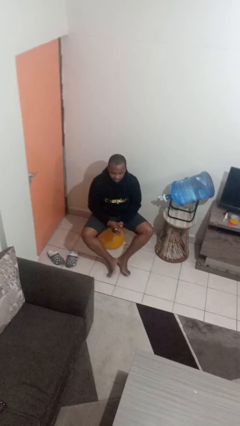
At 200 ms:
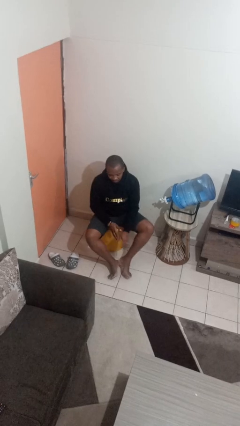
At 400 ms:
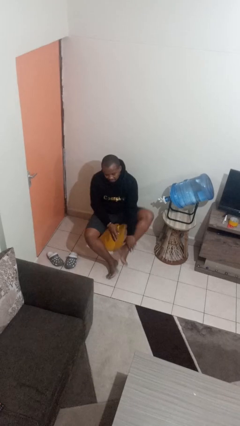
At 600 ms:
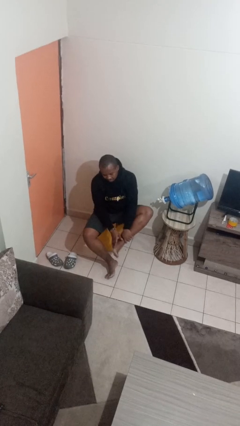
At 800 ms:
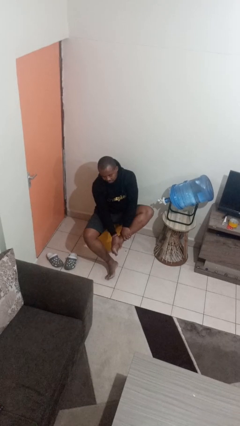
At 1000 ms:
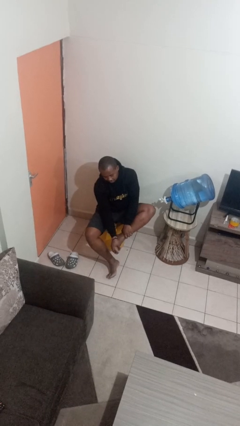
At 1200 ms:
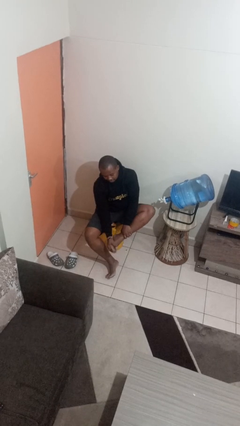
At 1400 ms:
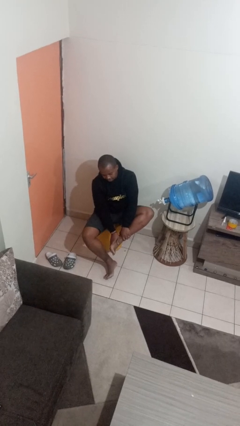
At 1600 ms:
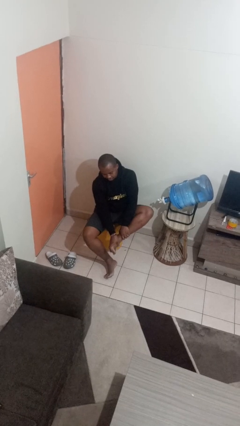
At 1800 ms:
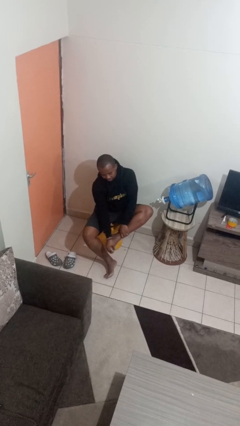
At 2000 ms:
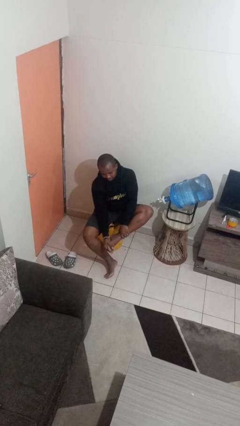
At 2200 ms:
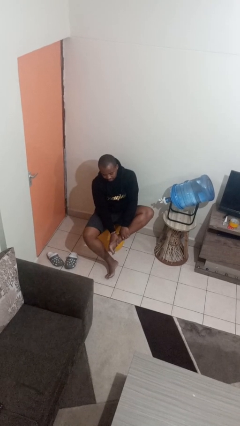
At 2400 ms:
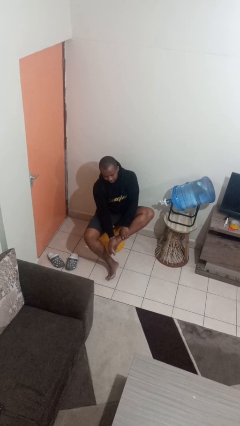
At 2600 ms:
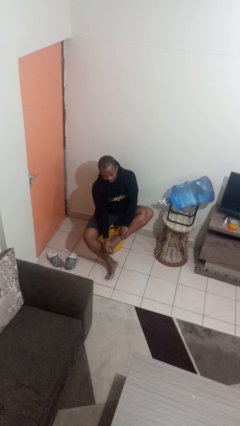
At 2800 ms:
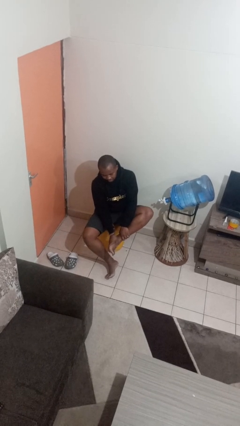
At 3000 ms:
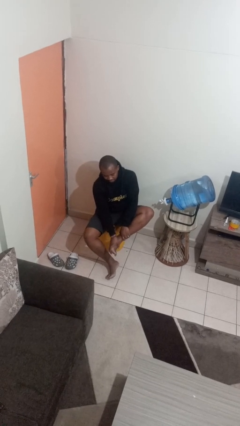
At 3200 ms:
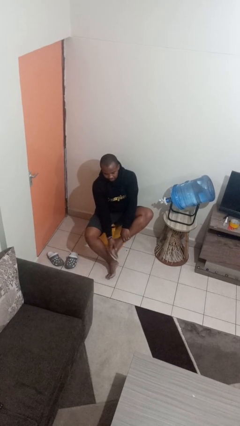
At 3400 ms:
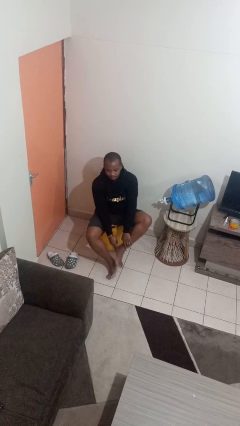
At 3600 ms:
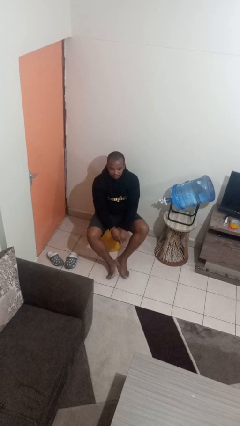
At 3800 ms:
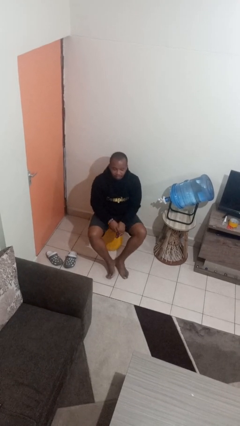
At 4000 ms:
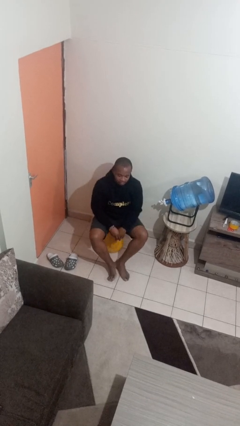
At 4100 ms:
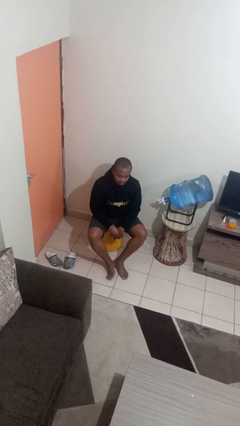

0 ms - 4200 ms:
person rubs foot

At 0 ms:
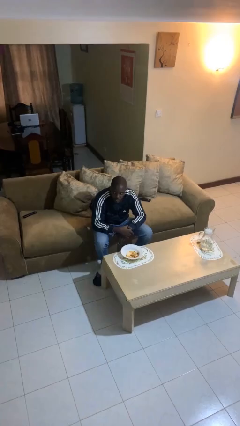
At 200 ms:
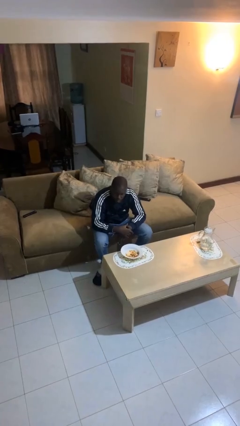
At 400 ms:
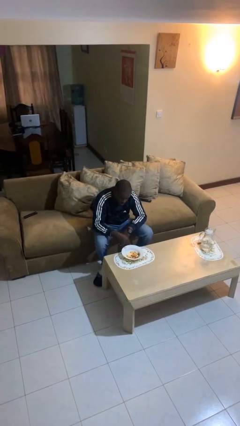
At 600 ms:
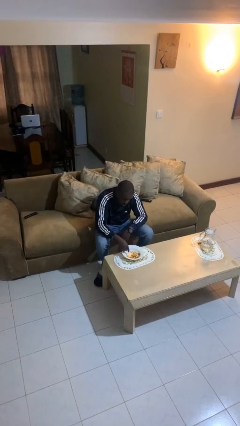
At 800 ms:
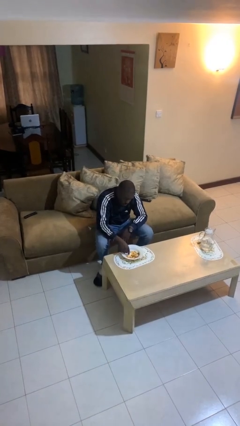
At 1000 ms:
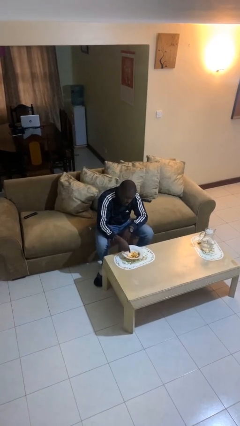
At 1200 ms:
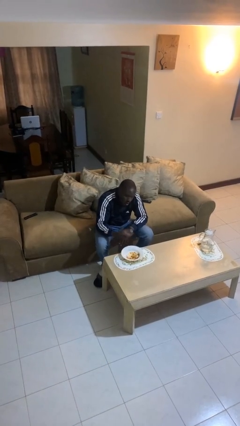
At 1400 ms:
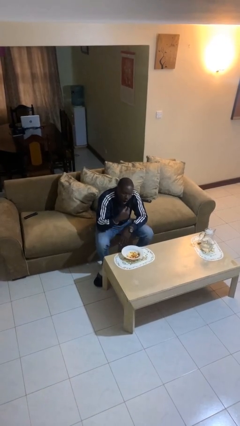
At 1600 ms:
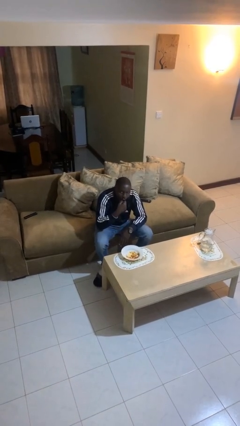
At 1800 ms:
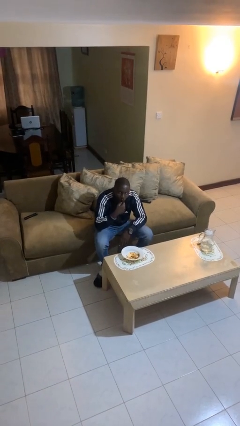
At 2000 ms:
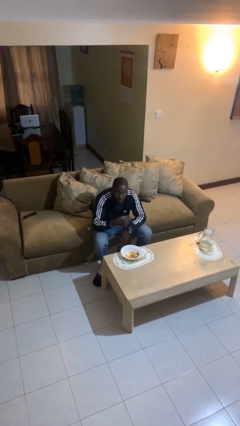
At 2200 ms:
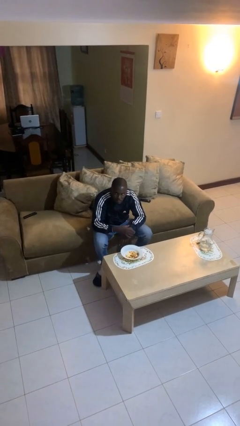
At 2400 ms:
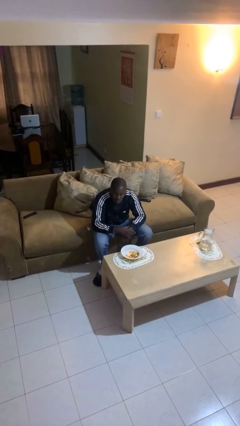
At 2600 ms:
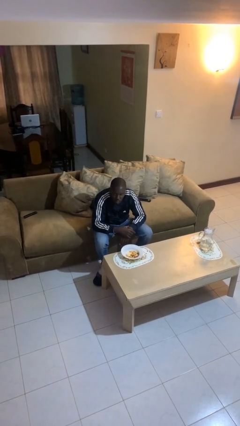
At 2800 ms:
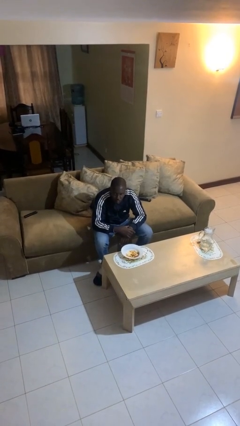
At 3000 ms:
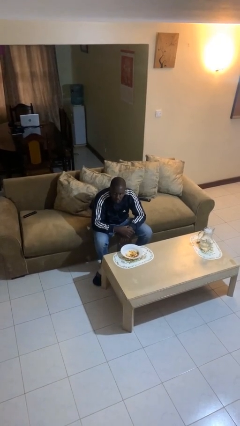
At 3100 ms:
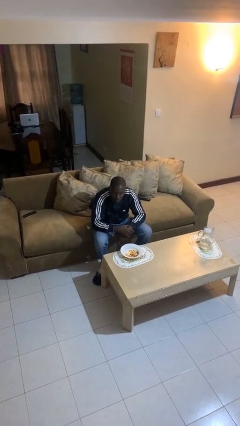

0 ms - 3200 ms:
person eats with hands

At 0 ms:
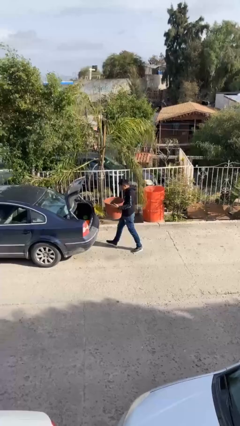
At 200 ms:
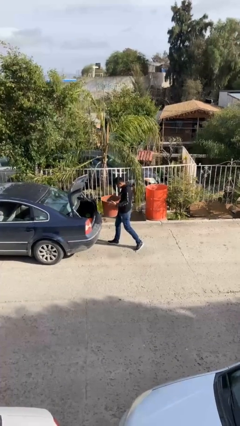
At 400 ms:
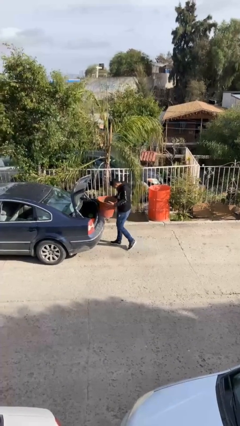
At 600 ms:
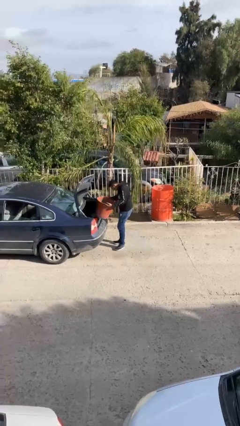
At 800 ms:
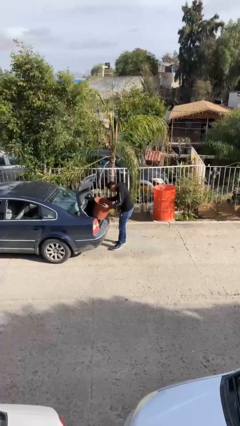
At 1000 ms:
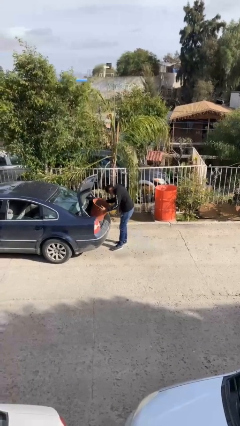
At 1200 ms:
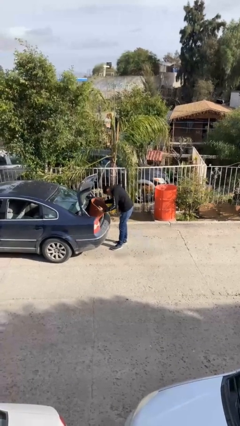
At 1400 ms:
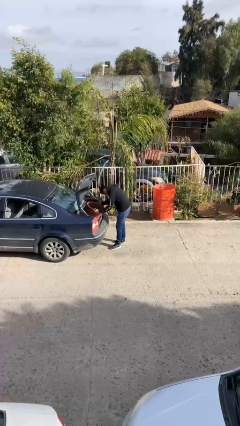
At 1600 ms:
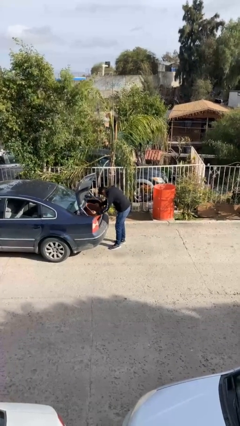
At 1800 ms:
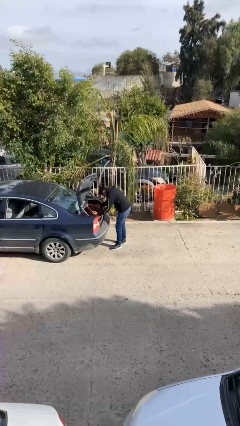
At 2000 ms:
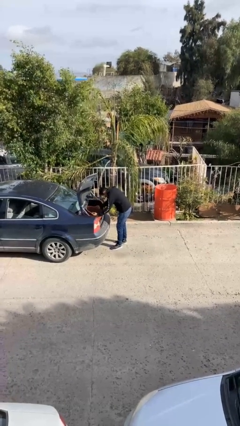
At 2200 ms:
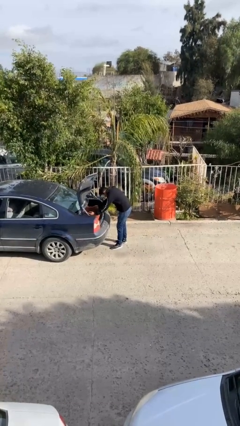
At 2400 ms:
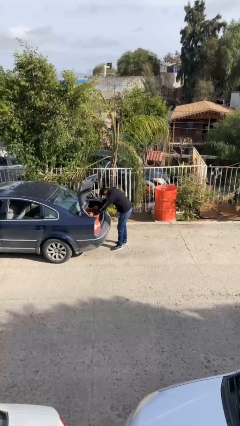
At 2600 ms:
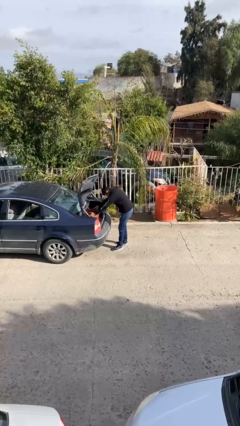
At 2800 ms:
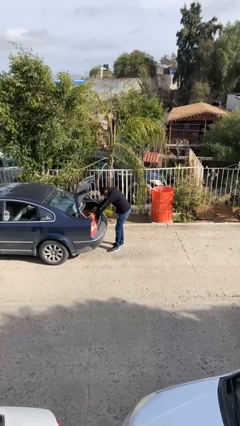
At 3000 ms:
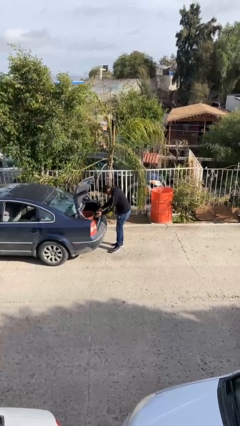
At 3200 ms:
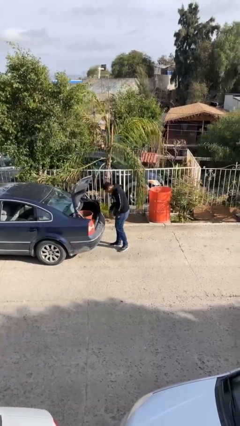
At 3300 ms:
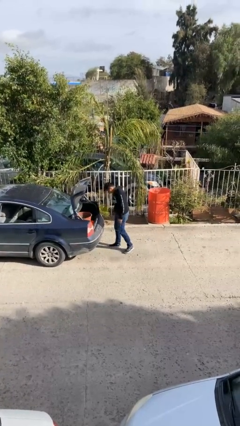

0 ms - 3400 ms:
person loads car

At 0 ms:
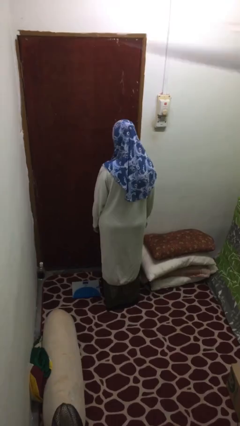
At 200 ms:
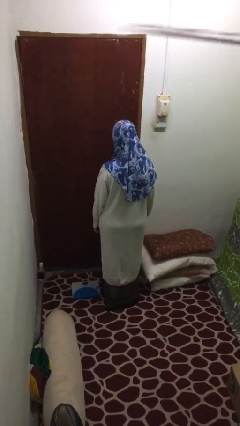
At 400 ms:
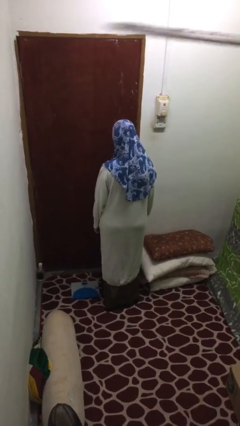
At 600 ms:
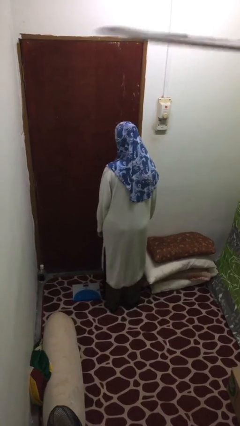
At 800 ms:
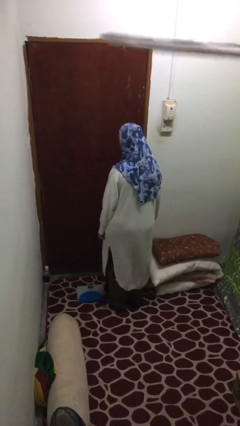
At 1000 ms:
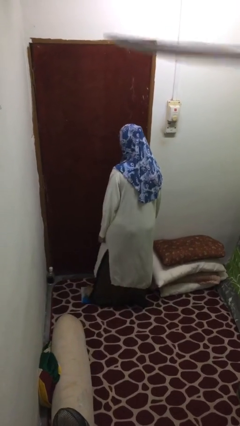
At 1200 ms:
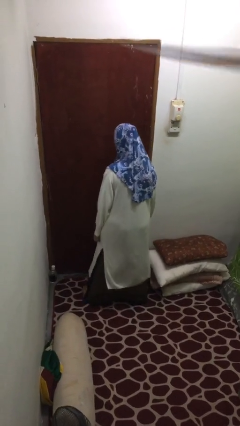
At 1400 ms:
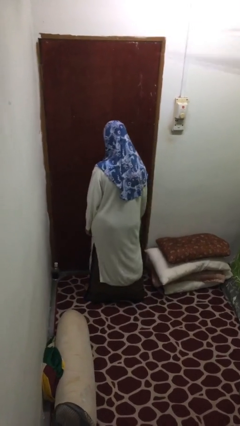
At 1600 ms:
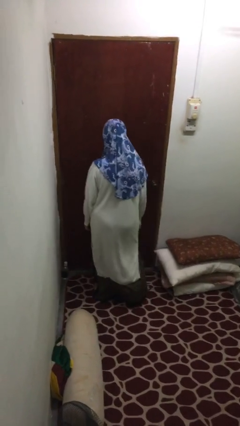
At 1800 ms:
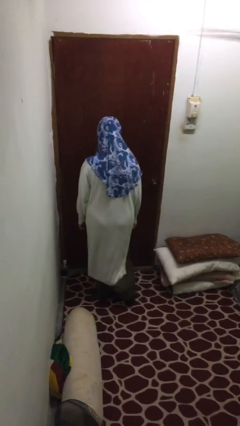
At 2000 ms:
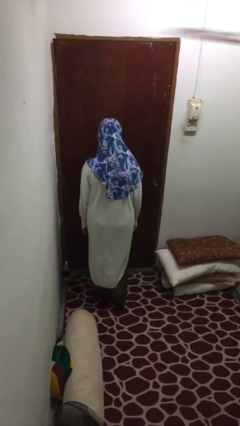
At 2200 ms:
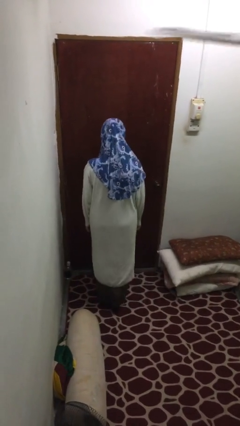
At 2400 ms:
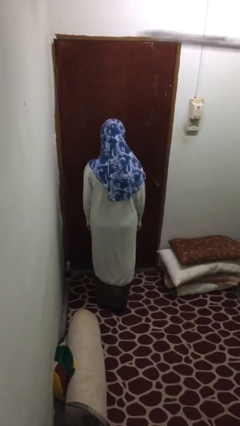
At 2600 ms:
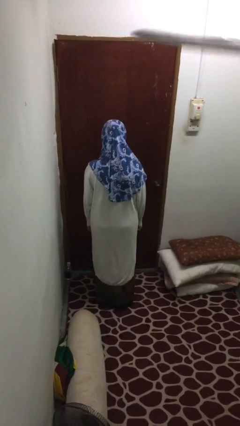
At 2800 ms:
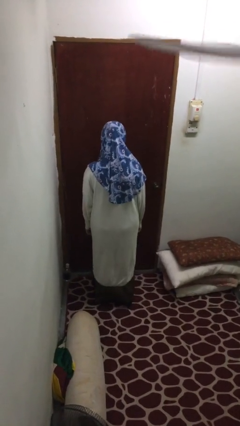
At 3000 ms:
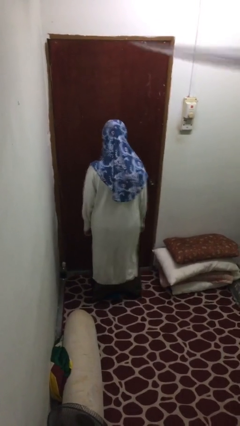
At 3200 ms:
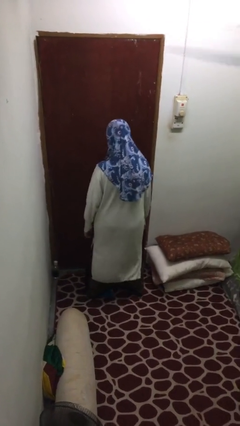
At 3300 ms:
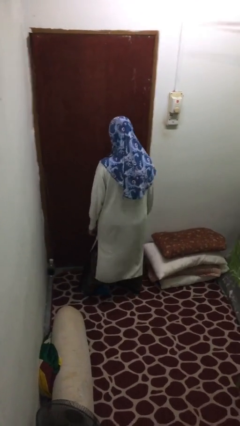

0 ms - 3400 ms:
person uses bodyweight scale

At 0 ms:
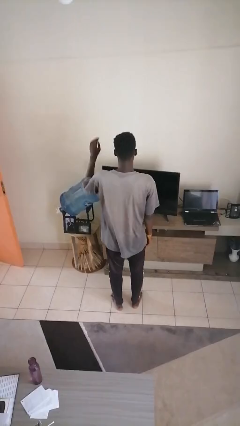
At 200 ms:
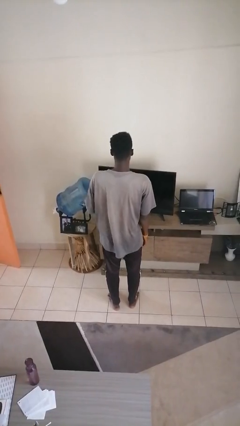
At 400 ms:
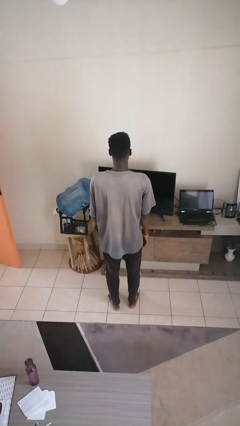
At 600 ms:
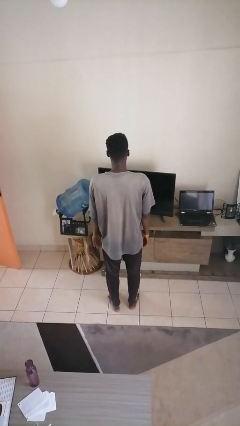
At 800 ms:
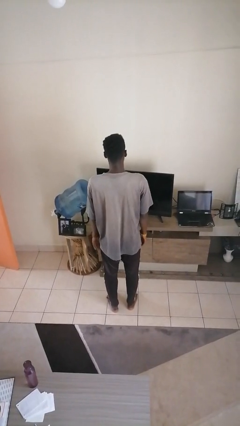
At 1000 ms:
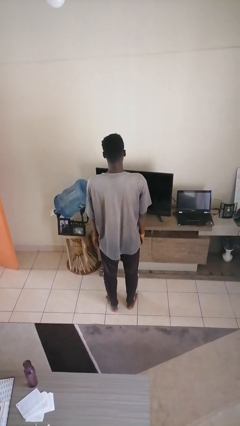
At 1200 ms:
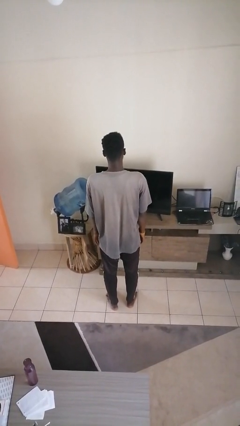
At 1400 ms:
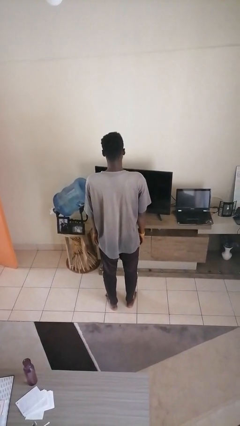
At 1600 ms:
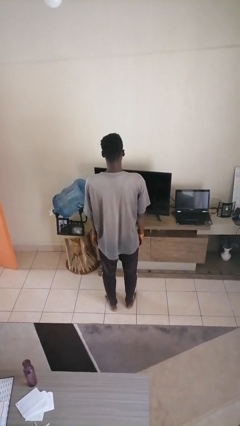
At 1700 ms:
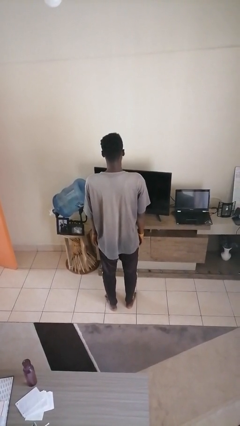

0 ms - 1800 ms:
person gestures lower hand

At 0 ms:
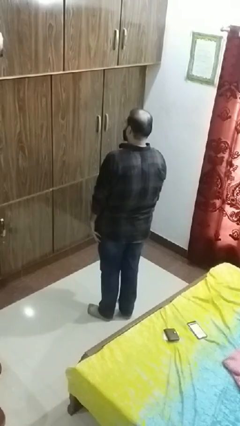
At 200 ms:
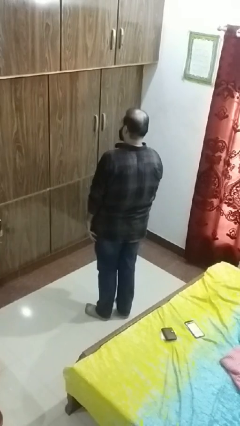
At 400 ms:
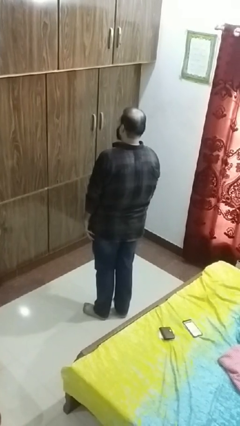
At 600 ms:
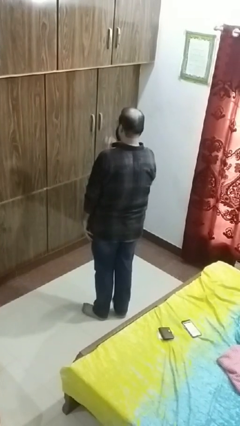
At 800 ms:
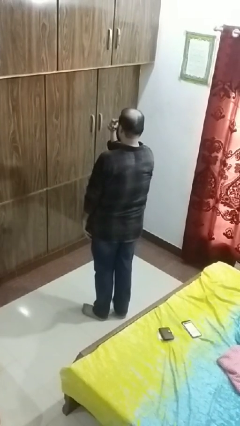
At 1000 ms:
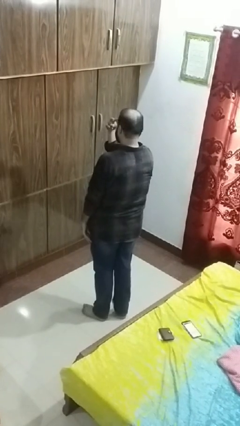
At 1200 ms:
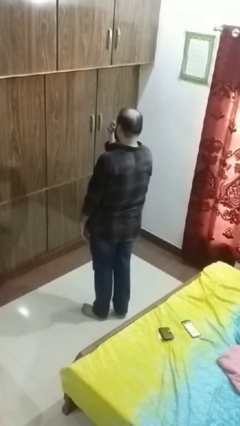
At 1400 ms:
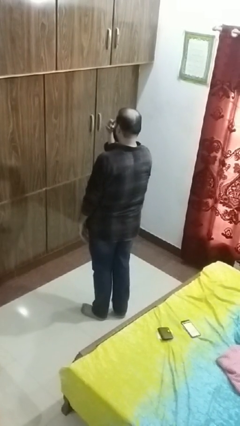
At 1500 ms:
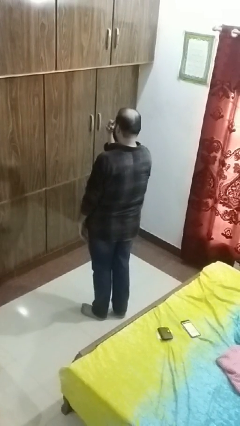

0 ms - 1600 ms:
person gestures watch closely
